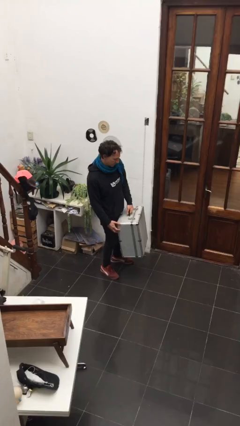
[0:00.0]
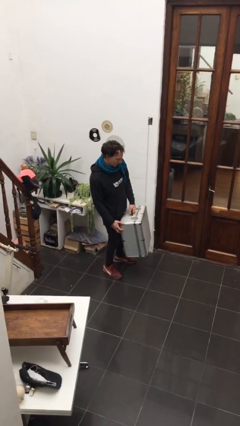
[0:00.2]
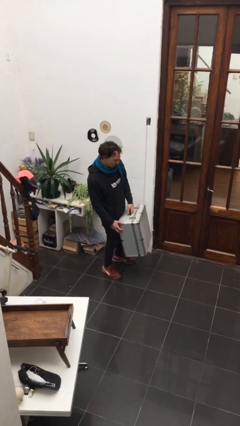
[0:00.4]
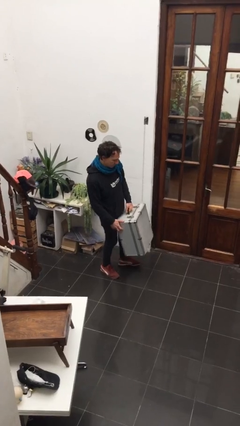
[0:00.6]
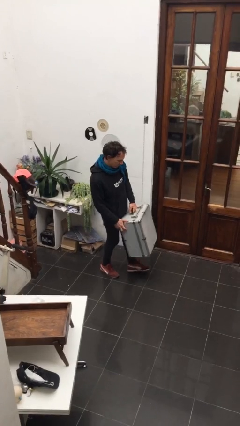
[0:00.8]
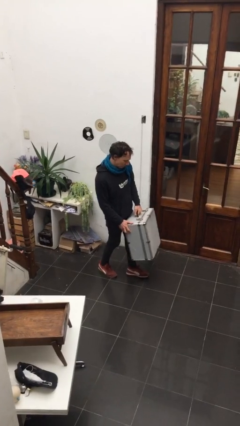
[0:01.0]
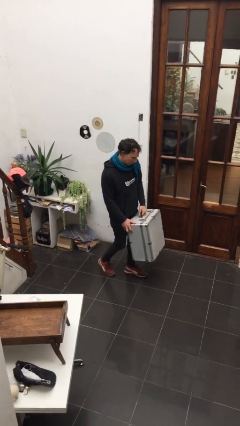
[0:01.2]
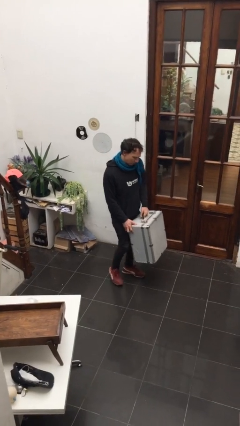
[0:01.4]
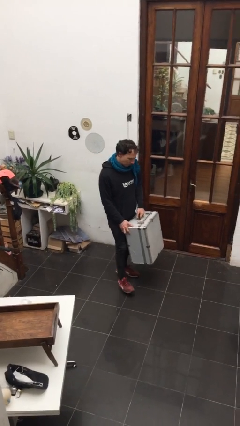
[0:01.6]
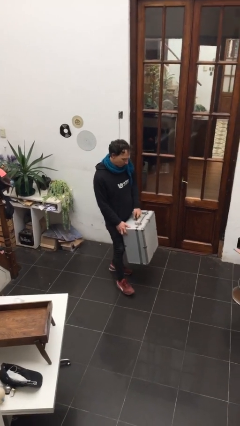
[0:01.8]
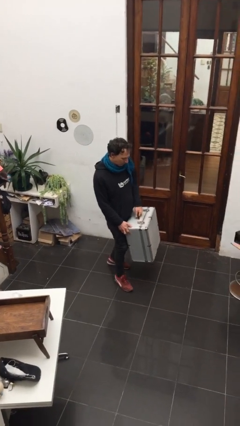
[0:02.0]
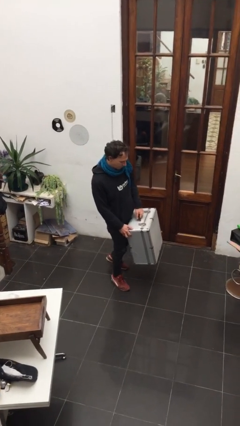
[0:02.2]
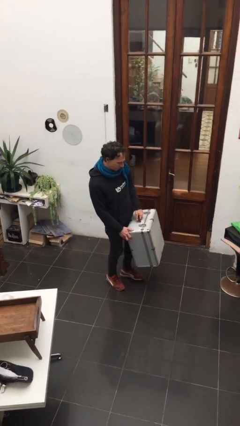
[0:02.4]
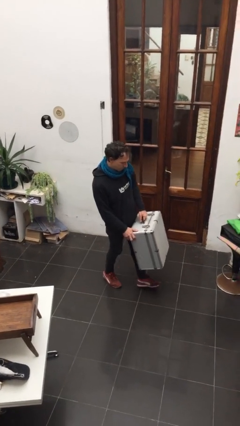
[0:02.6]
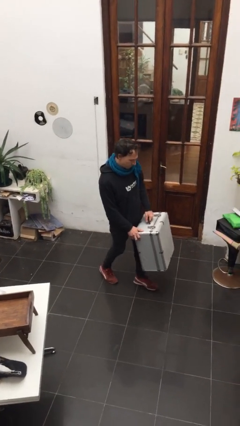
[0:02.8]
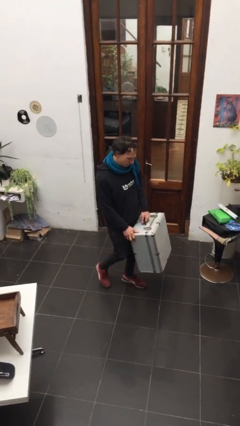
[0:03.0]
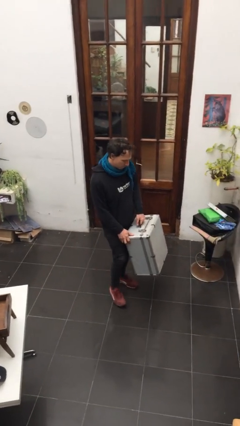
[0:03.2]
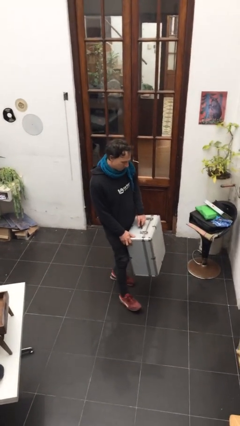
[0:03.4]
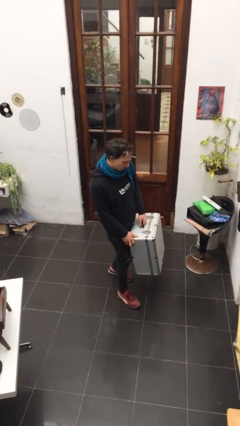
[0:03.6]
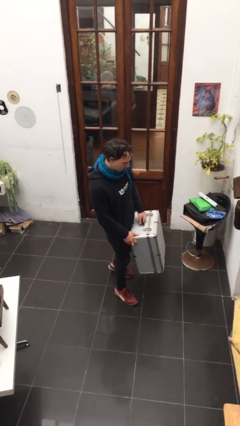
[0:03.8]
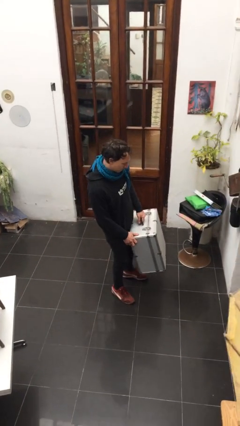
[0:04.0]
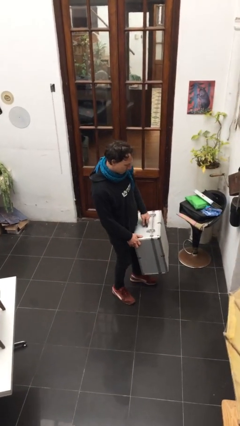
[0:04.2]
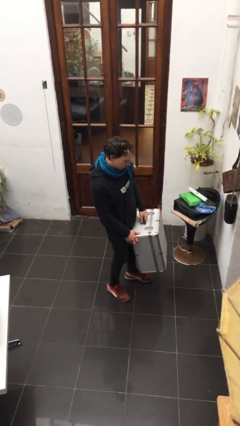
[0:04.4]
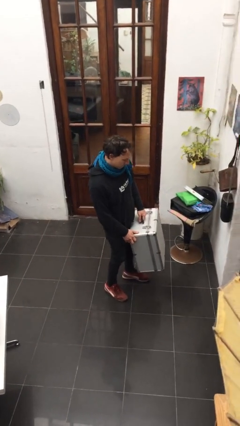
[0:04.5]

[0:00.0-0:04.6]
person carries heavy object

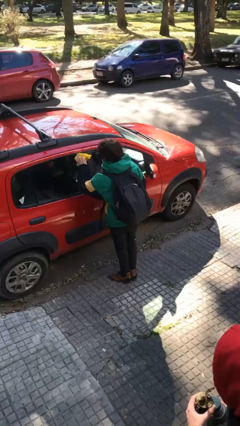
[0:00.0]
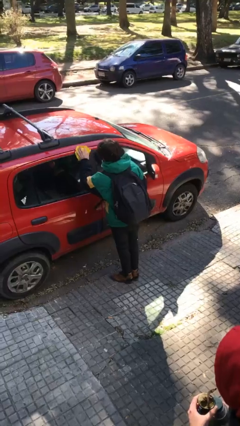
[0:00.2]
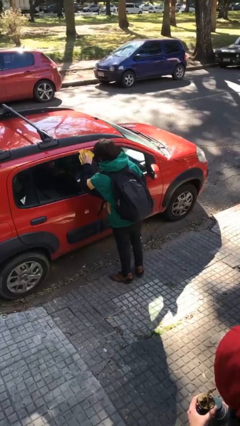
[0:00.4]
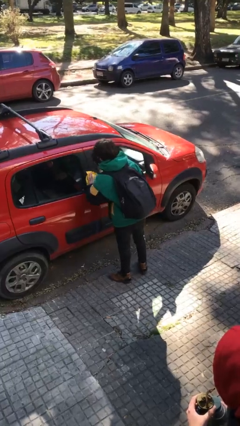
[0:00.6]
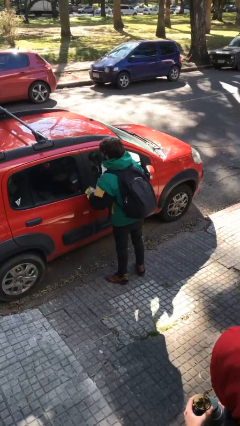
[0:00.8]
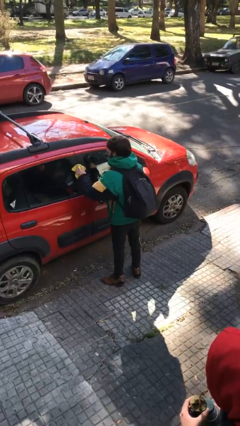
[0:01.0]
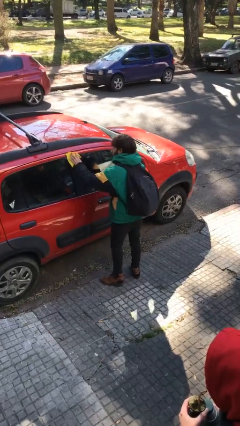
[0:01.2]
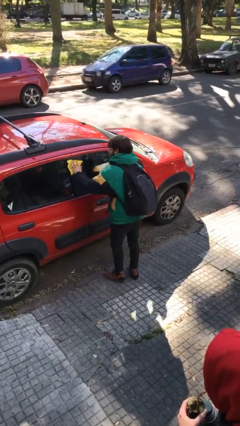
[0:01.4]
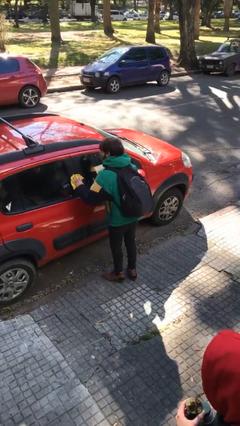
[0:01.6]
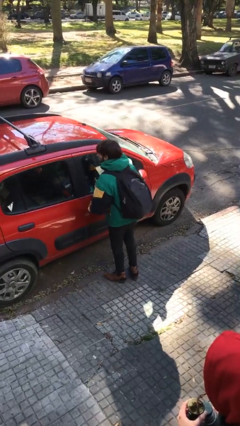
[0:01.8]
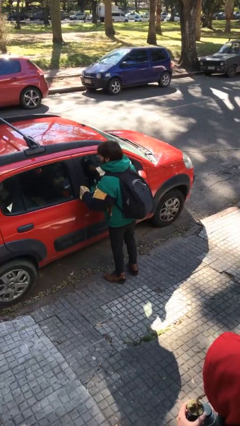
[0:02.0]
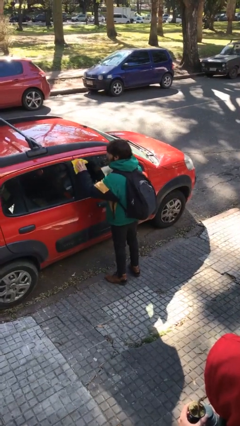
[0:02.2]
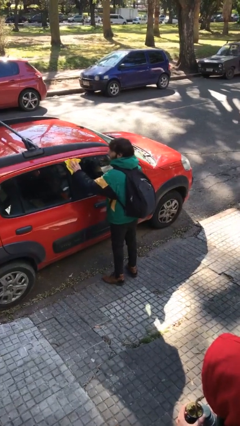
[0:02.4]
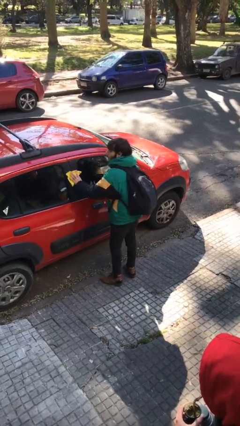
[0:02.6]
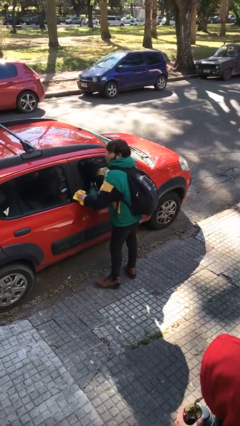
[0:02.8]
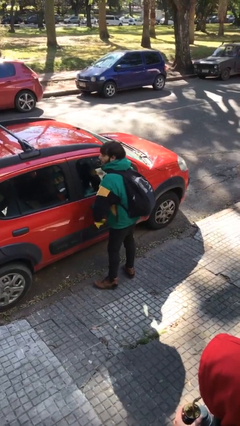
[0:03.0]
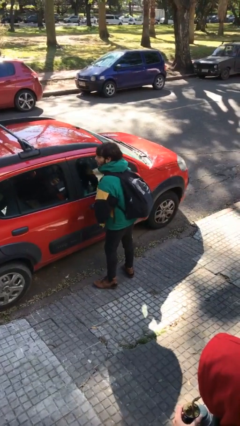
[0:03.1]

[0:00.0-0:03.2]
person polishes car with rag

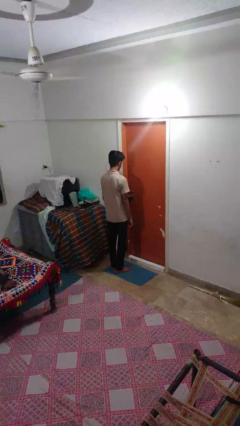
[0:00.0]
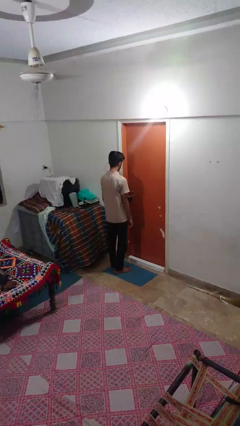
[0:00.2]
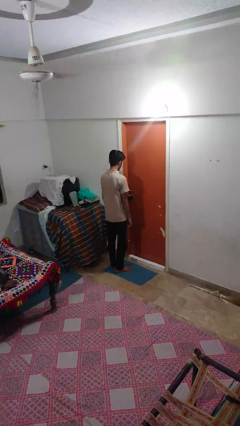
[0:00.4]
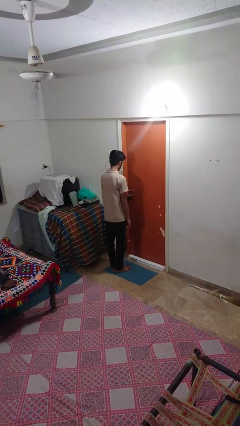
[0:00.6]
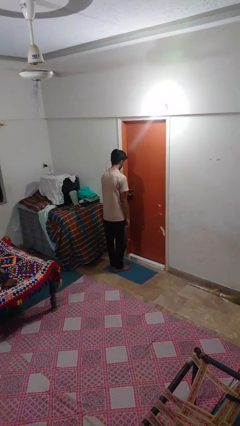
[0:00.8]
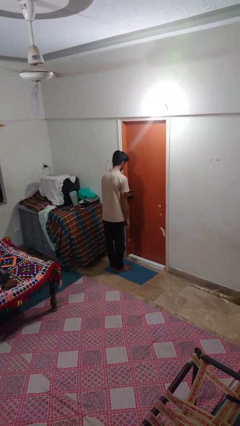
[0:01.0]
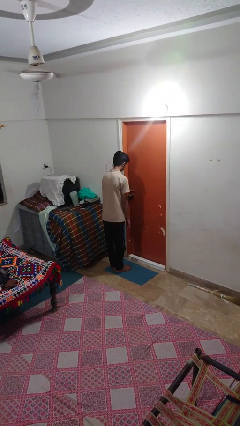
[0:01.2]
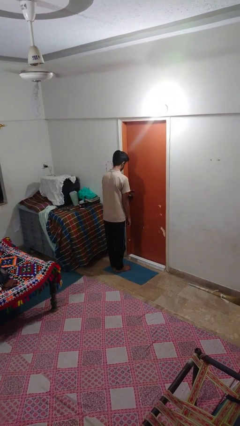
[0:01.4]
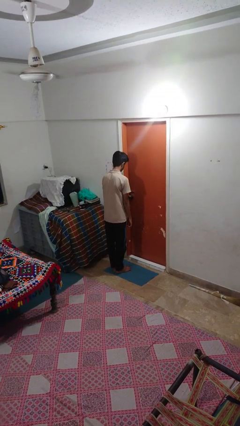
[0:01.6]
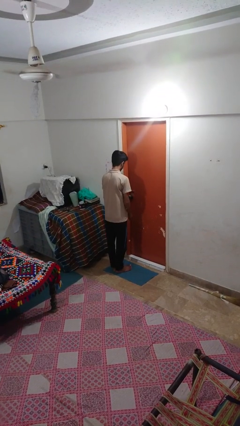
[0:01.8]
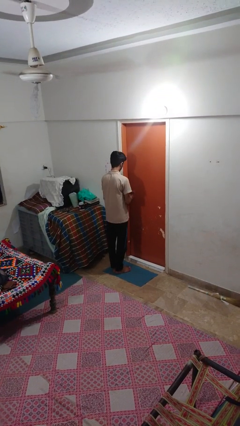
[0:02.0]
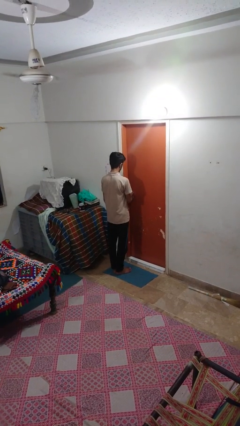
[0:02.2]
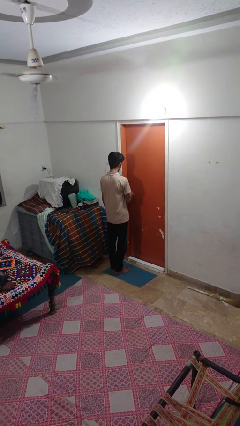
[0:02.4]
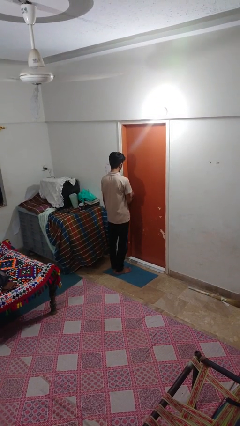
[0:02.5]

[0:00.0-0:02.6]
person unlocks door with keys

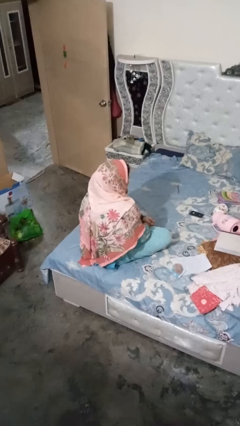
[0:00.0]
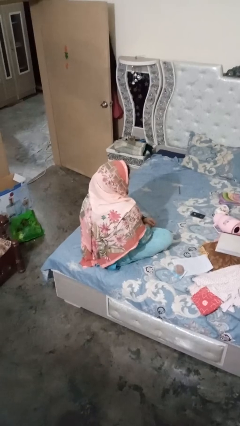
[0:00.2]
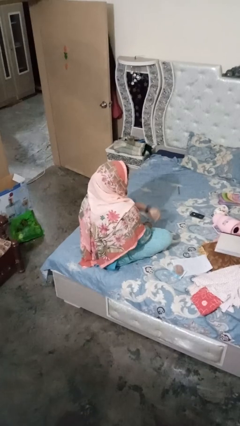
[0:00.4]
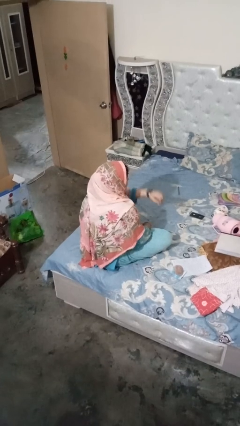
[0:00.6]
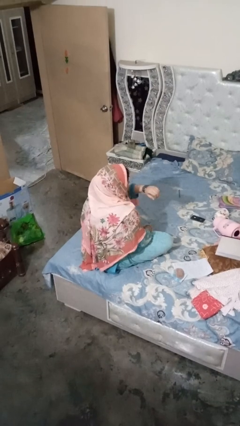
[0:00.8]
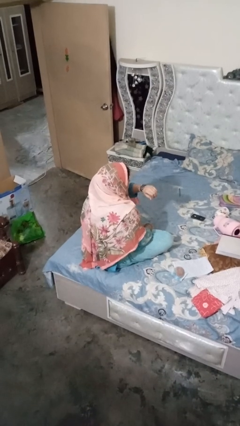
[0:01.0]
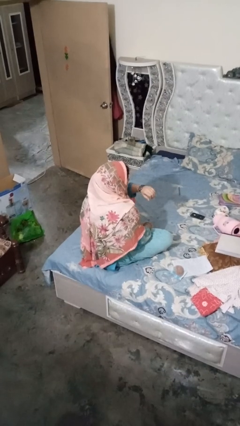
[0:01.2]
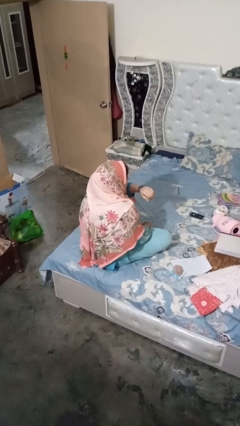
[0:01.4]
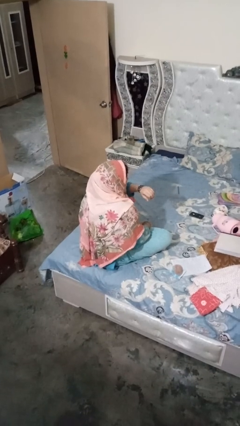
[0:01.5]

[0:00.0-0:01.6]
person gestures watch closely

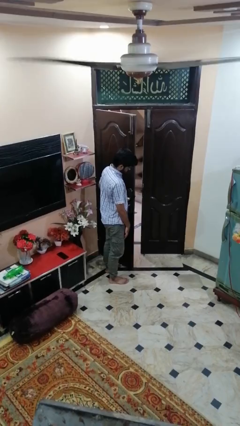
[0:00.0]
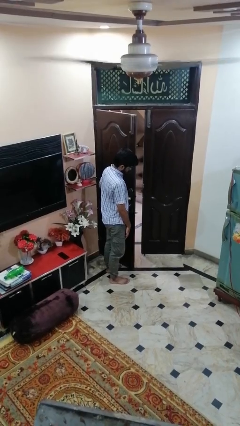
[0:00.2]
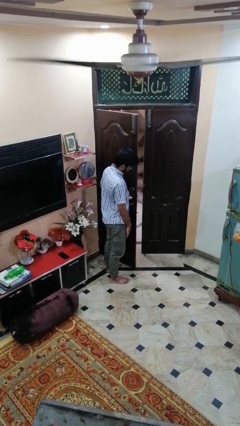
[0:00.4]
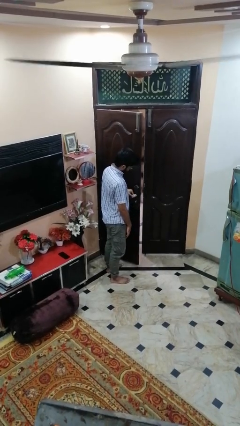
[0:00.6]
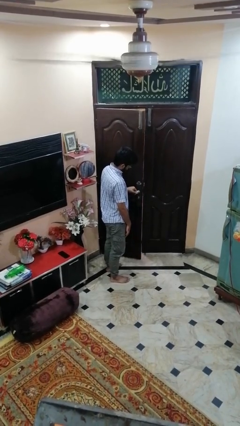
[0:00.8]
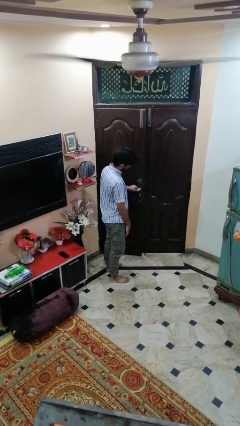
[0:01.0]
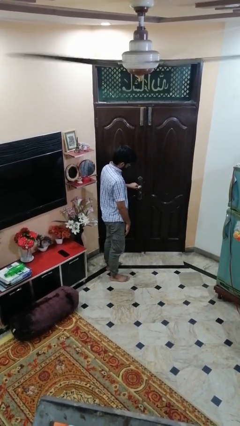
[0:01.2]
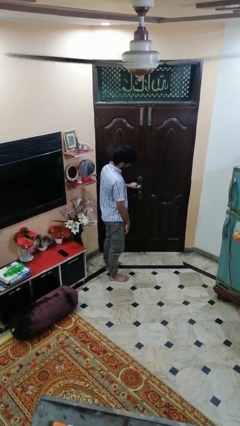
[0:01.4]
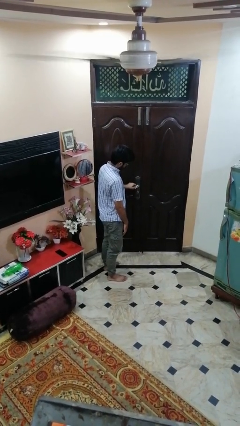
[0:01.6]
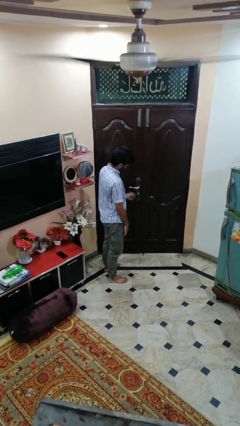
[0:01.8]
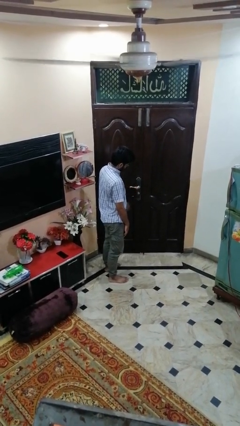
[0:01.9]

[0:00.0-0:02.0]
person closes facility door

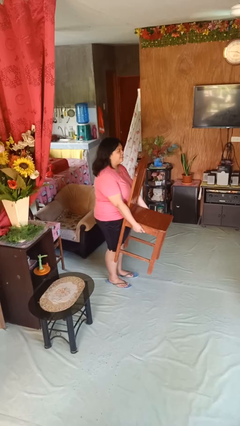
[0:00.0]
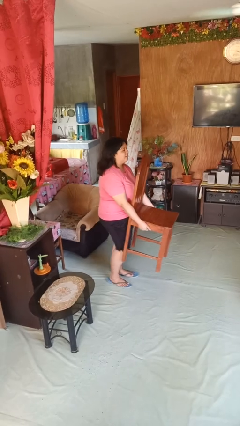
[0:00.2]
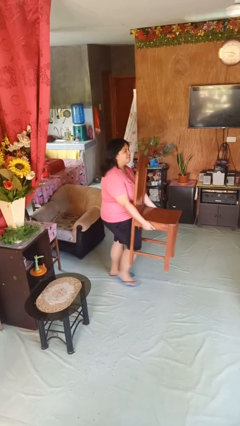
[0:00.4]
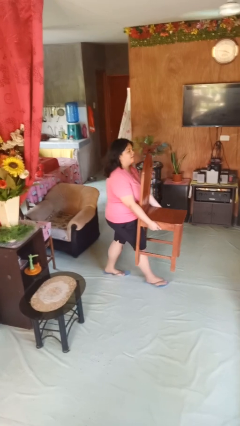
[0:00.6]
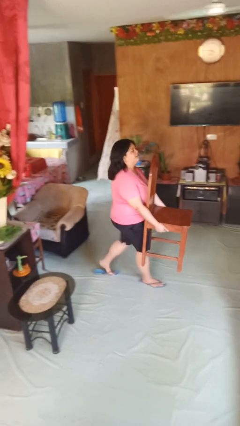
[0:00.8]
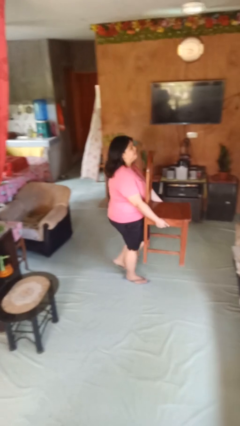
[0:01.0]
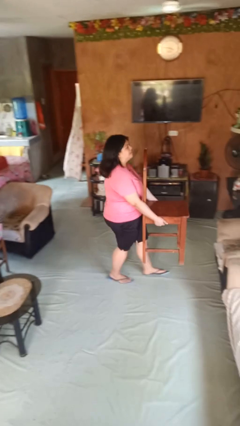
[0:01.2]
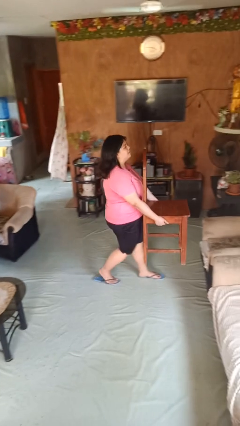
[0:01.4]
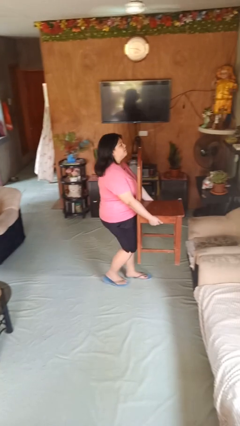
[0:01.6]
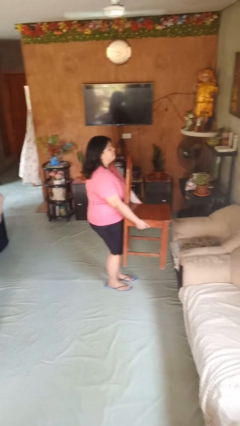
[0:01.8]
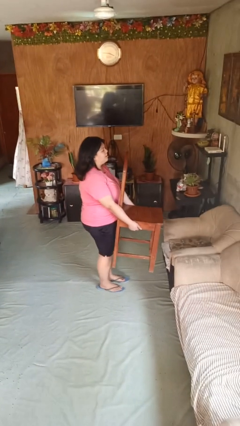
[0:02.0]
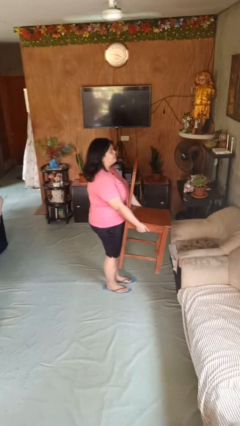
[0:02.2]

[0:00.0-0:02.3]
person carries furniture

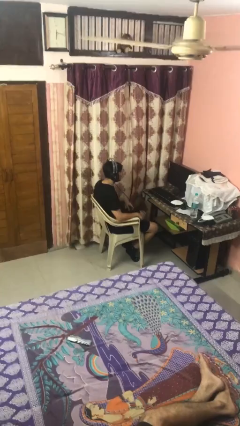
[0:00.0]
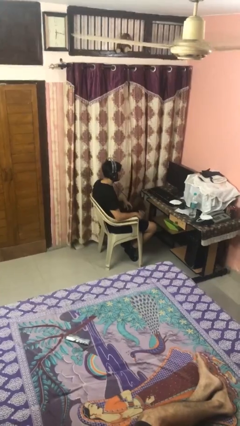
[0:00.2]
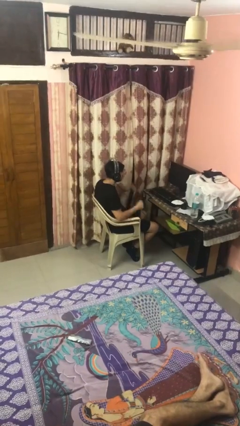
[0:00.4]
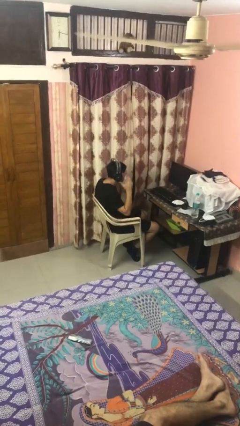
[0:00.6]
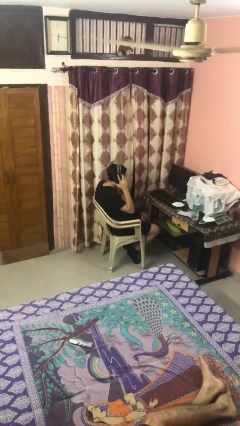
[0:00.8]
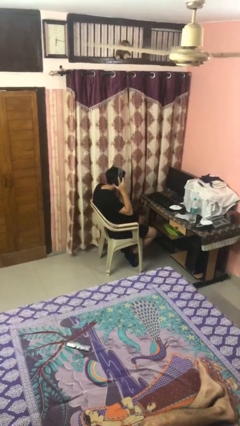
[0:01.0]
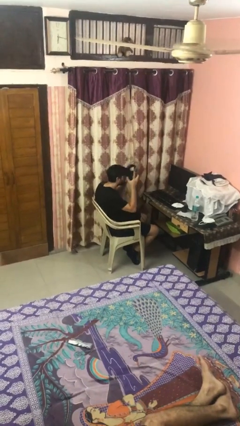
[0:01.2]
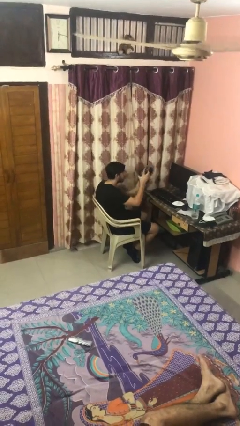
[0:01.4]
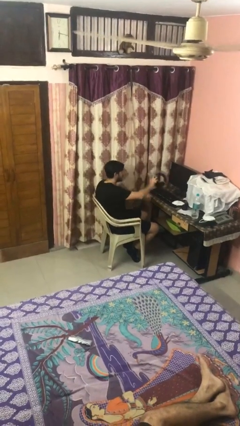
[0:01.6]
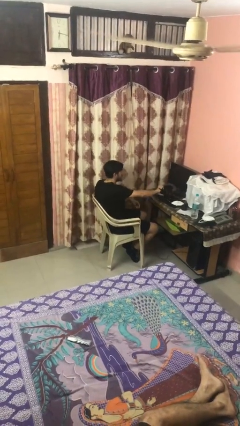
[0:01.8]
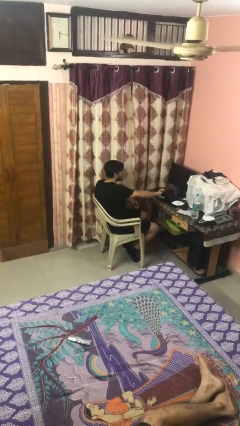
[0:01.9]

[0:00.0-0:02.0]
person takes off headphones
